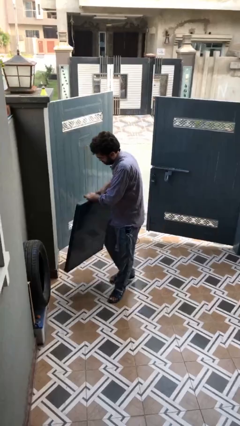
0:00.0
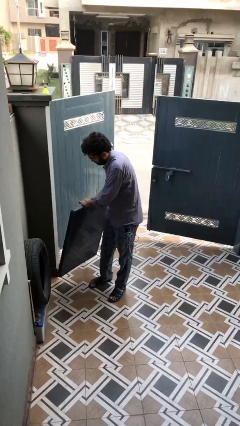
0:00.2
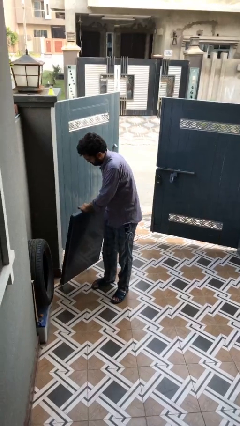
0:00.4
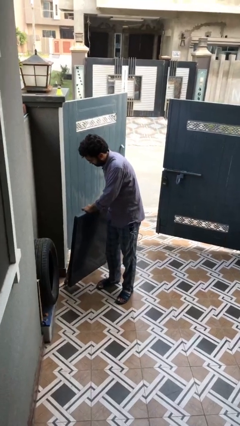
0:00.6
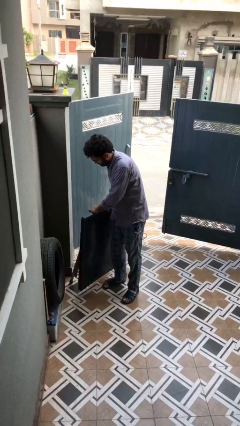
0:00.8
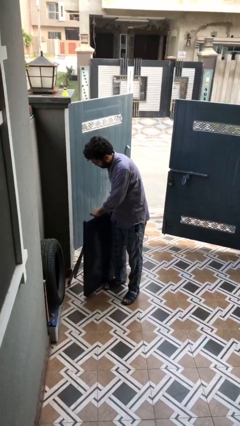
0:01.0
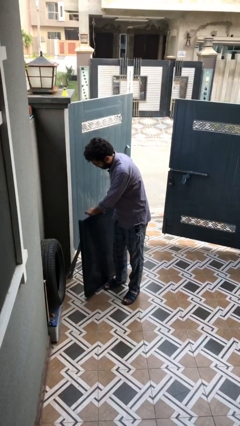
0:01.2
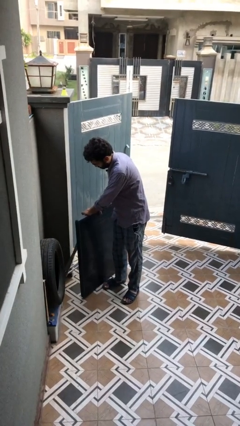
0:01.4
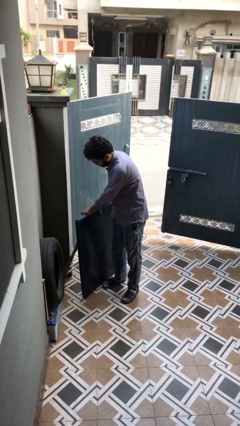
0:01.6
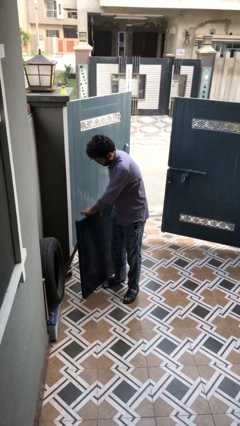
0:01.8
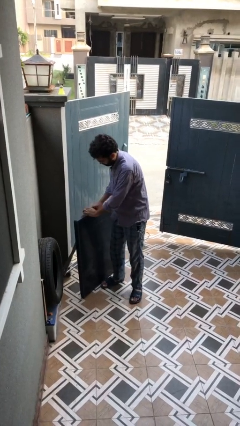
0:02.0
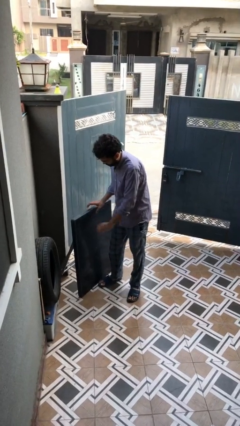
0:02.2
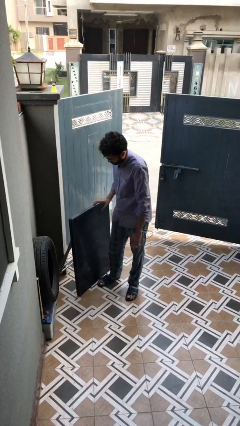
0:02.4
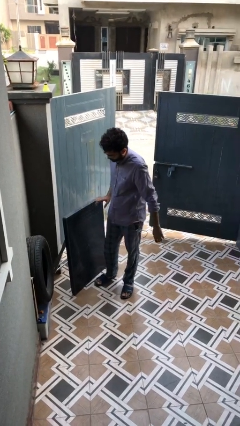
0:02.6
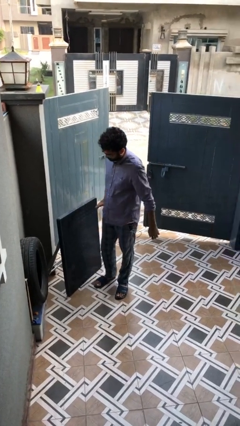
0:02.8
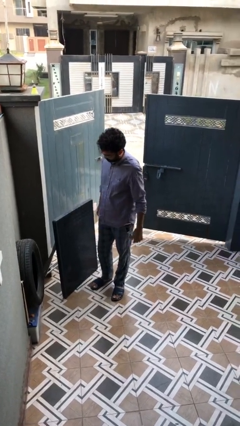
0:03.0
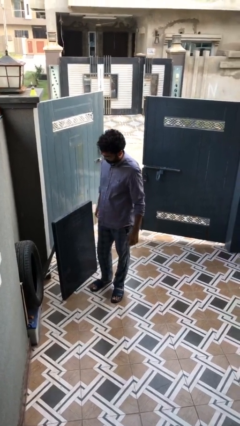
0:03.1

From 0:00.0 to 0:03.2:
person puts down object on floor

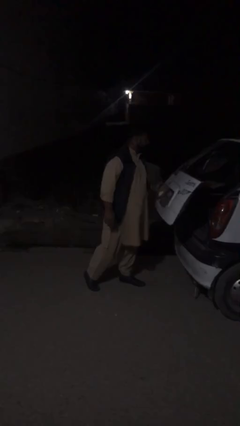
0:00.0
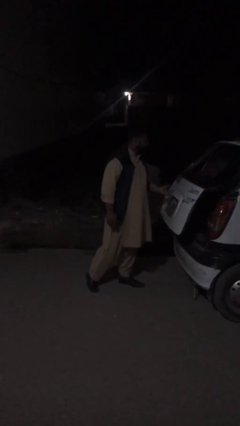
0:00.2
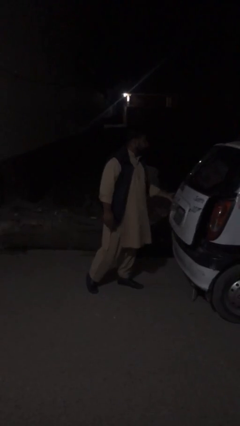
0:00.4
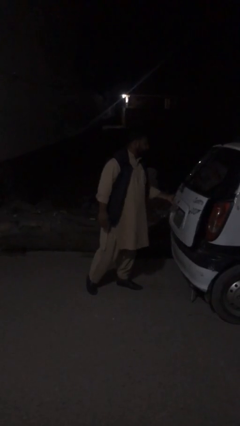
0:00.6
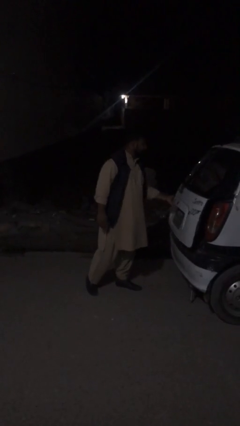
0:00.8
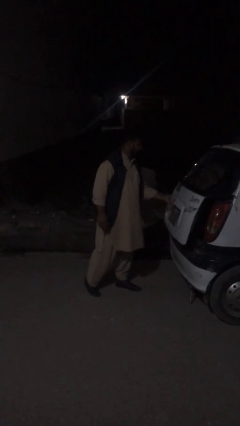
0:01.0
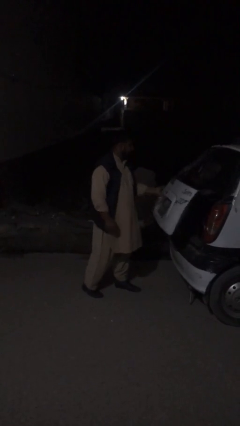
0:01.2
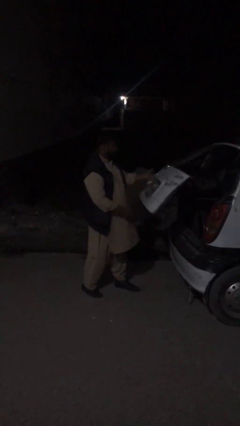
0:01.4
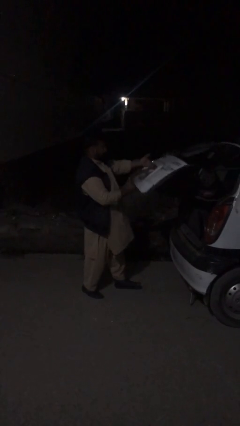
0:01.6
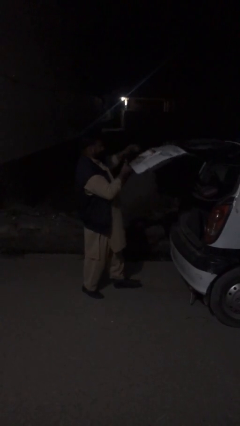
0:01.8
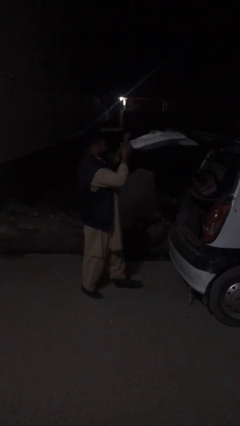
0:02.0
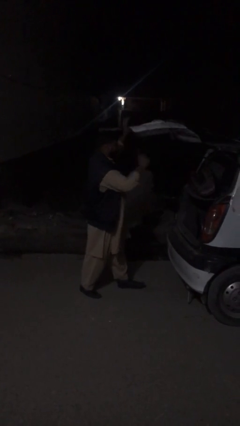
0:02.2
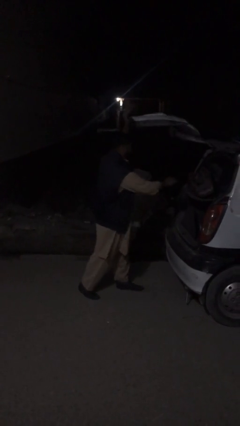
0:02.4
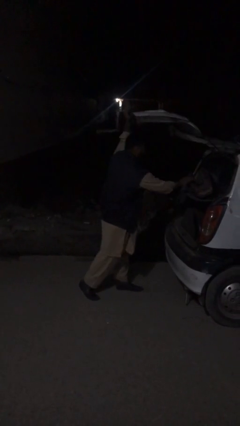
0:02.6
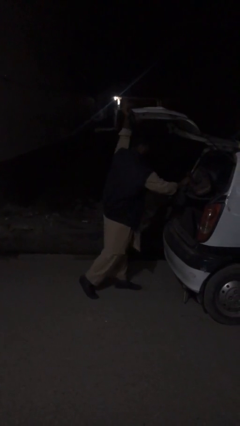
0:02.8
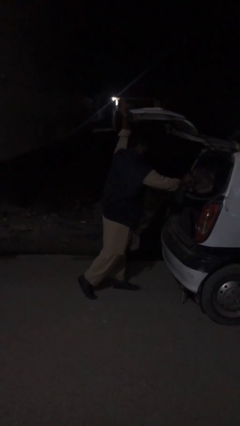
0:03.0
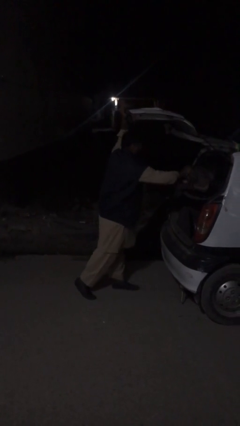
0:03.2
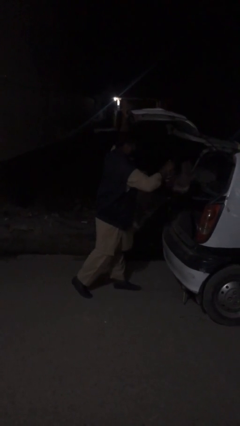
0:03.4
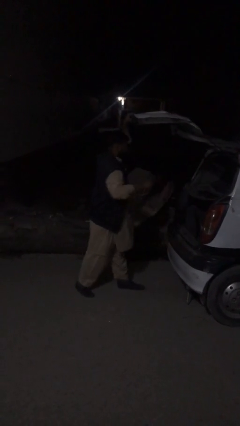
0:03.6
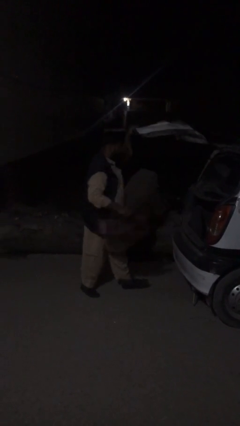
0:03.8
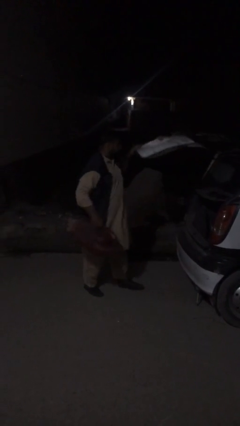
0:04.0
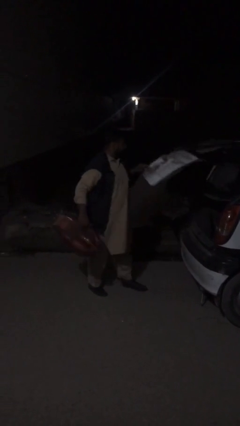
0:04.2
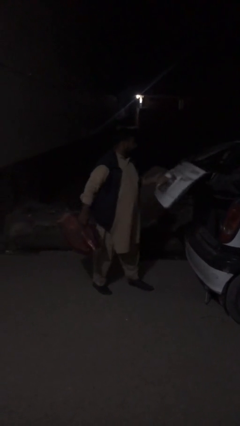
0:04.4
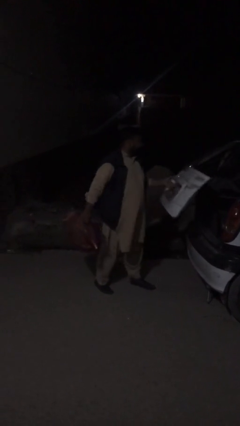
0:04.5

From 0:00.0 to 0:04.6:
person unloads car

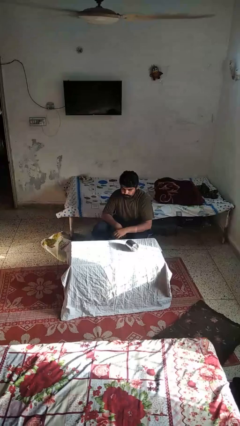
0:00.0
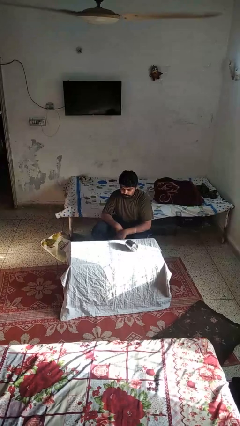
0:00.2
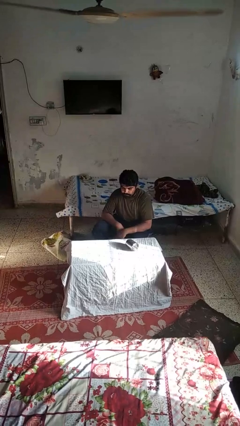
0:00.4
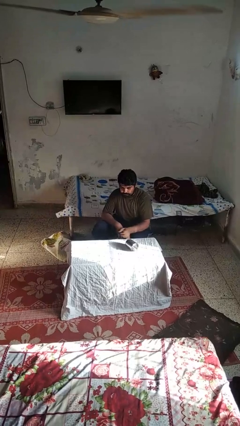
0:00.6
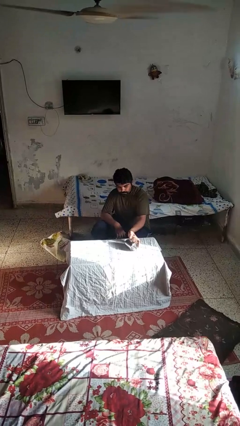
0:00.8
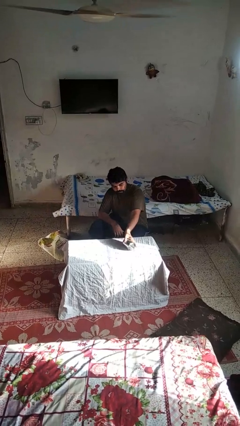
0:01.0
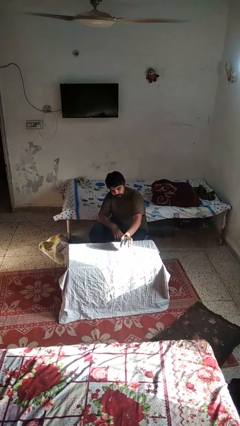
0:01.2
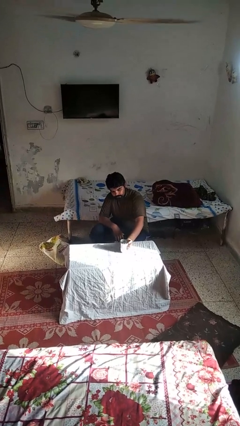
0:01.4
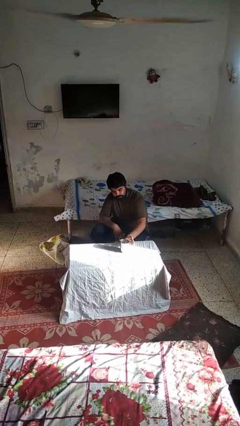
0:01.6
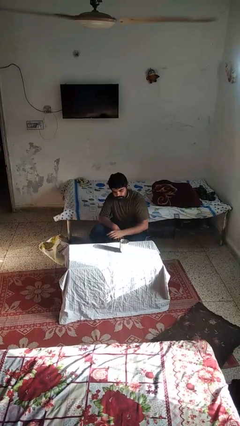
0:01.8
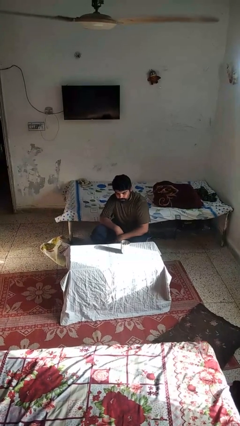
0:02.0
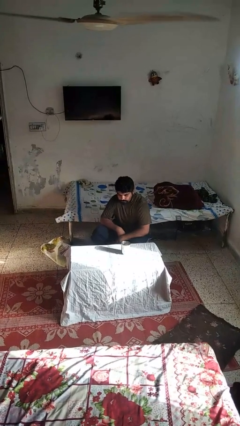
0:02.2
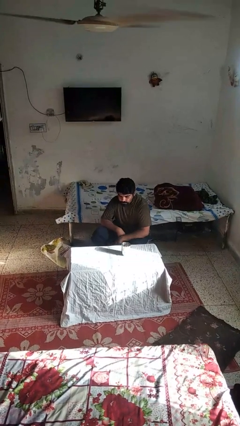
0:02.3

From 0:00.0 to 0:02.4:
person sets upright glass

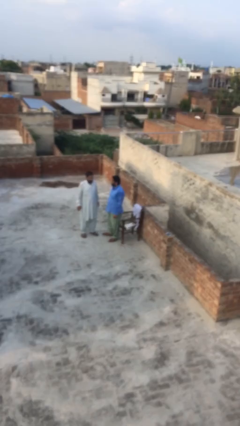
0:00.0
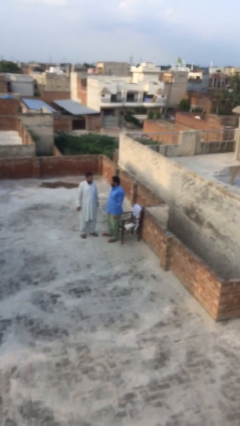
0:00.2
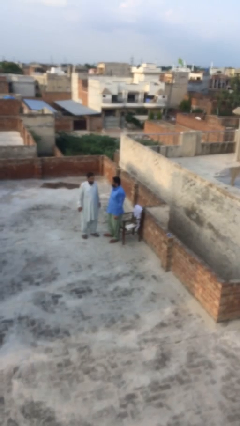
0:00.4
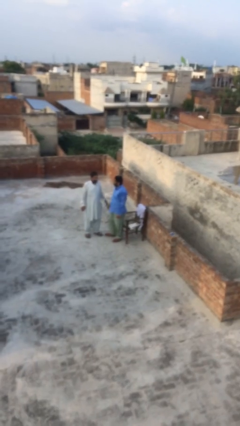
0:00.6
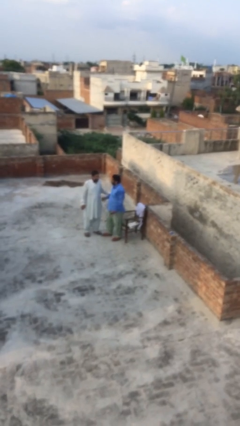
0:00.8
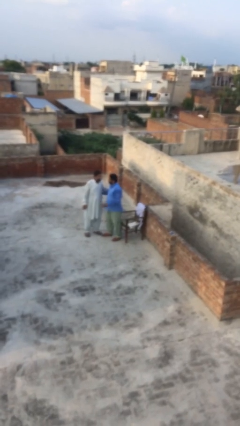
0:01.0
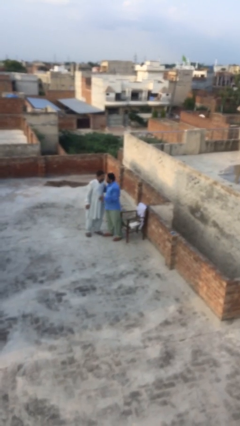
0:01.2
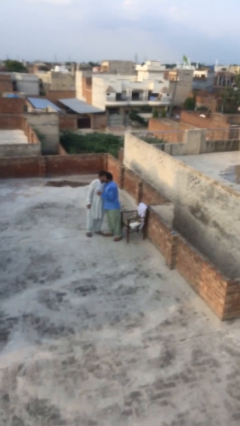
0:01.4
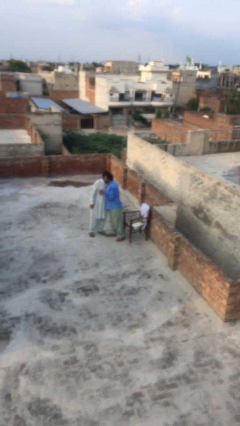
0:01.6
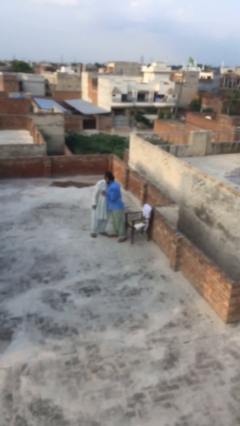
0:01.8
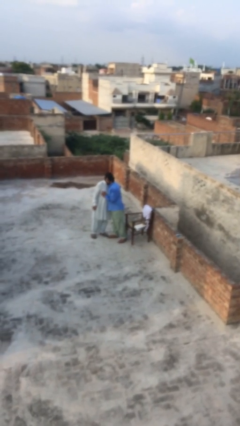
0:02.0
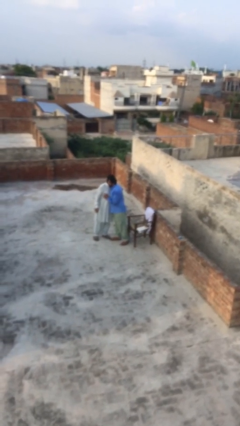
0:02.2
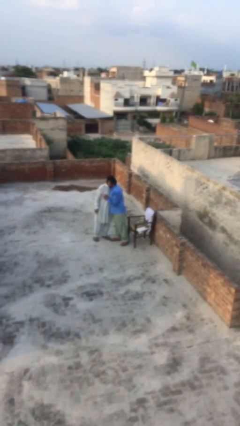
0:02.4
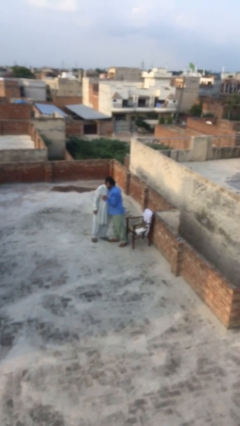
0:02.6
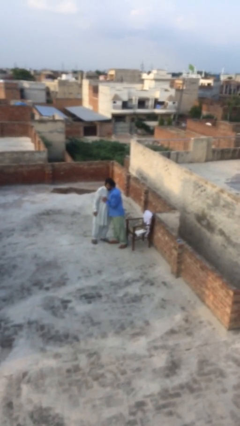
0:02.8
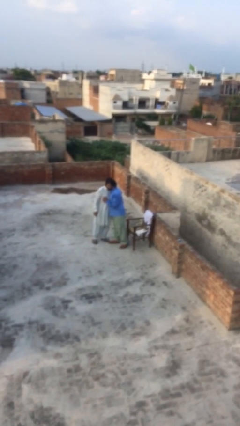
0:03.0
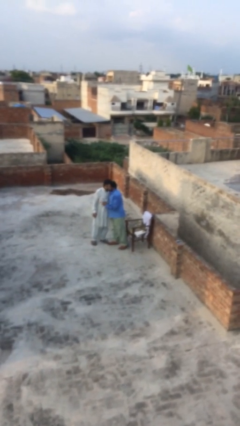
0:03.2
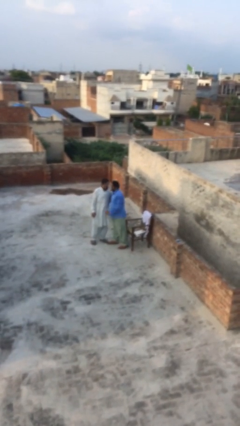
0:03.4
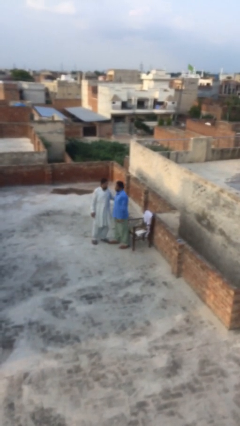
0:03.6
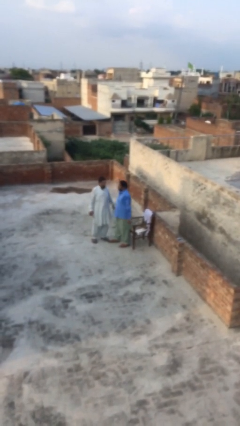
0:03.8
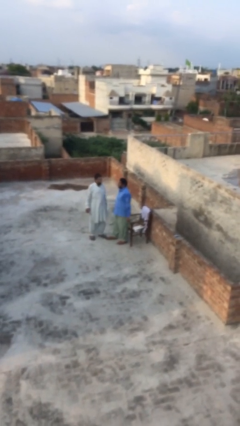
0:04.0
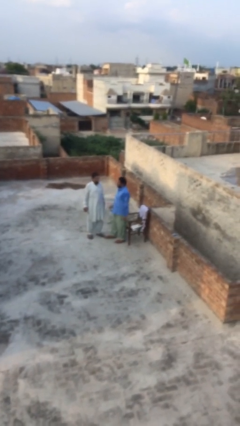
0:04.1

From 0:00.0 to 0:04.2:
person embraces person

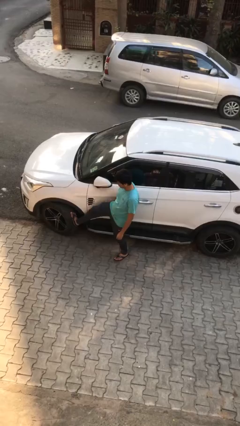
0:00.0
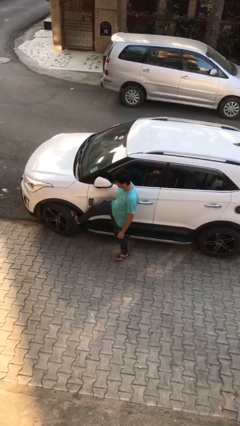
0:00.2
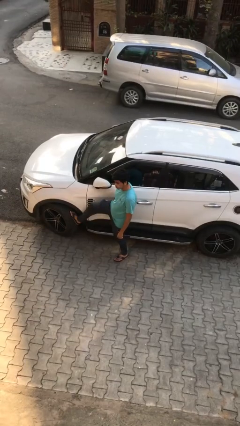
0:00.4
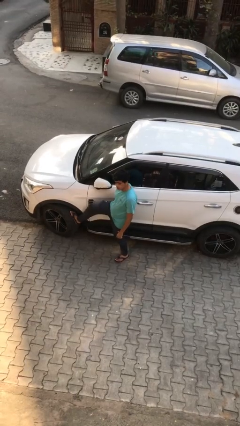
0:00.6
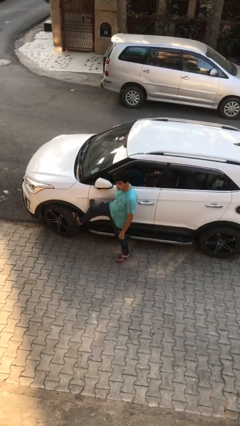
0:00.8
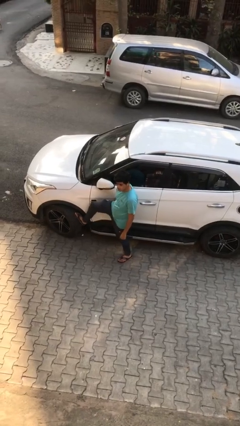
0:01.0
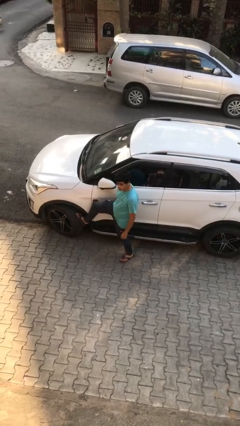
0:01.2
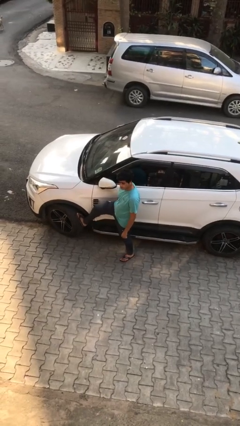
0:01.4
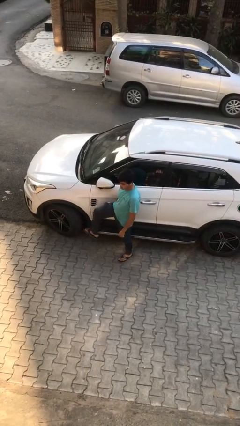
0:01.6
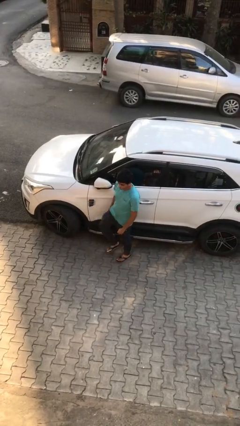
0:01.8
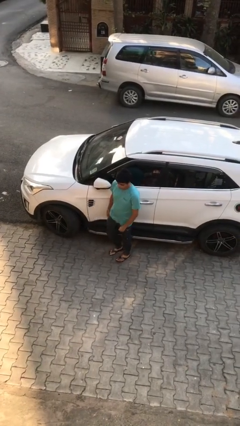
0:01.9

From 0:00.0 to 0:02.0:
person kicks car tires

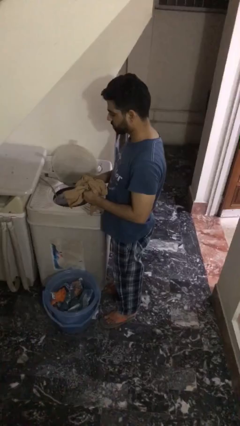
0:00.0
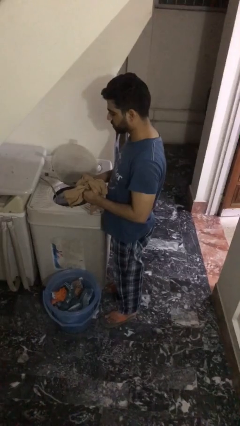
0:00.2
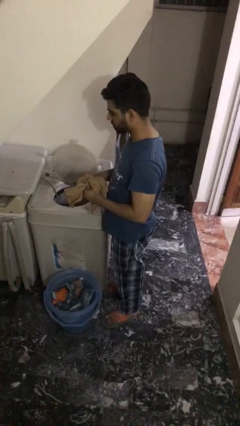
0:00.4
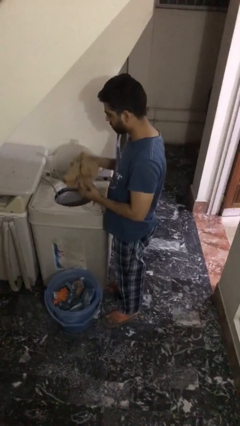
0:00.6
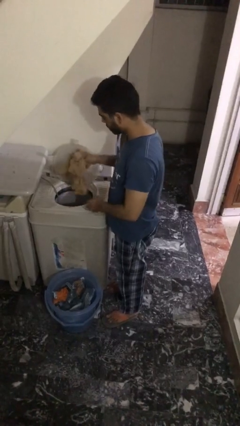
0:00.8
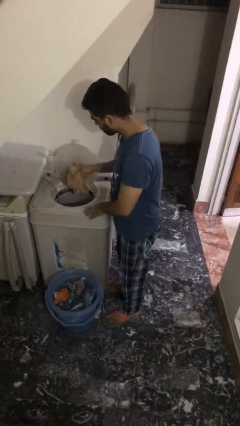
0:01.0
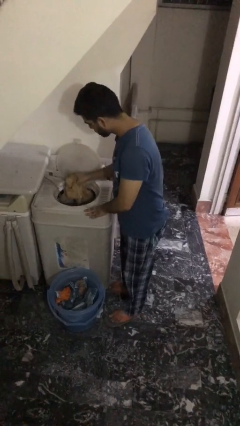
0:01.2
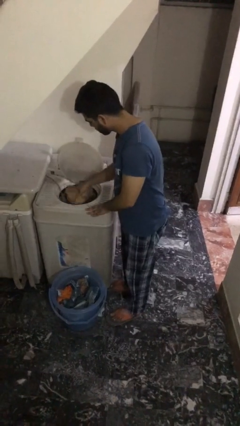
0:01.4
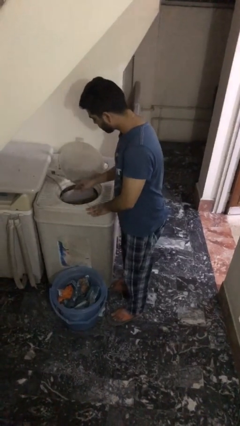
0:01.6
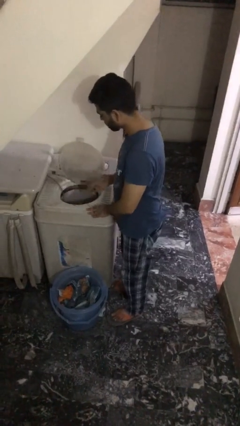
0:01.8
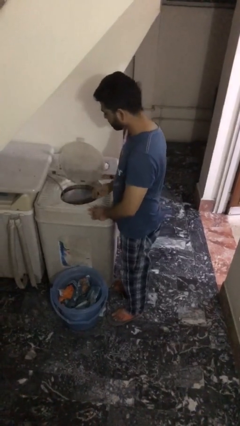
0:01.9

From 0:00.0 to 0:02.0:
person loads clotheswasher
